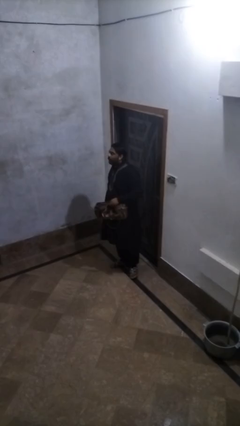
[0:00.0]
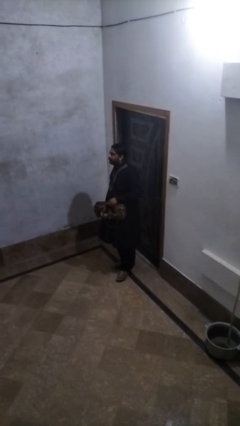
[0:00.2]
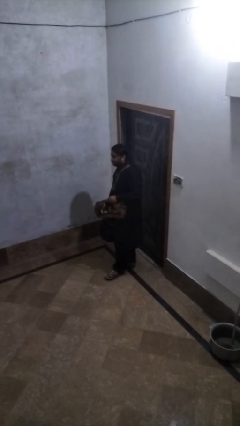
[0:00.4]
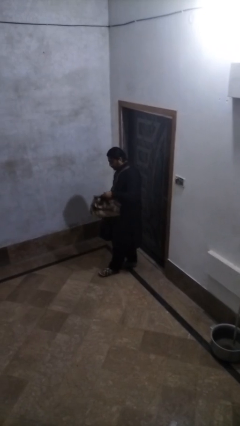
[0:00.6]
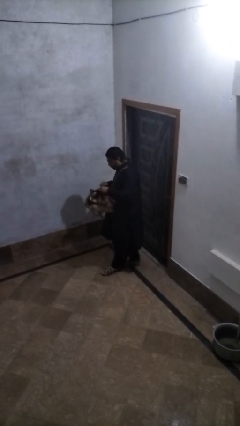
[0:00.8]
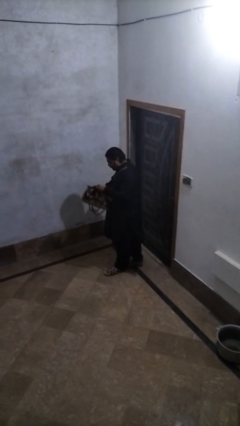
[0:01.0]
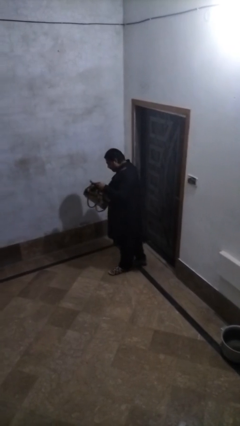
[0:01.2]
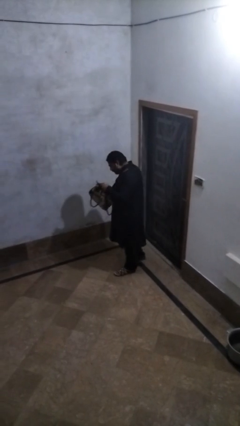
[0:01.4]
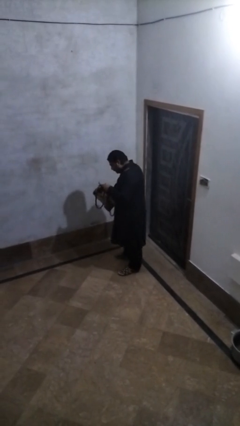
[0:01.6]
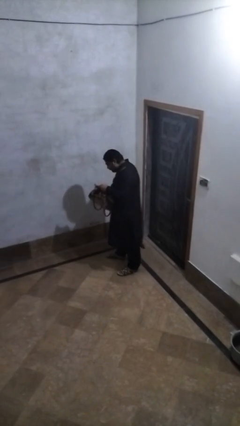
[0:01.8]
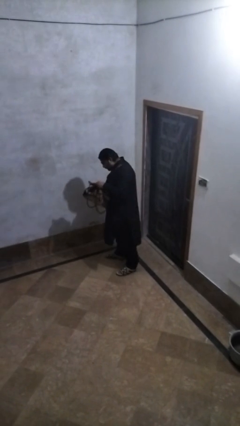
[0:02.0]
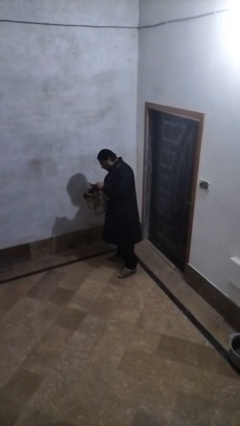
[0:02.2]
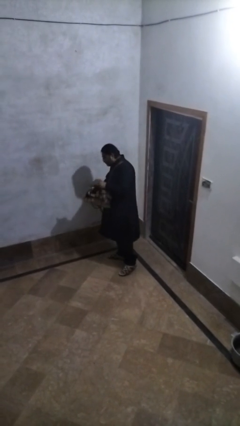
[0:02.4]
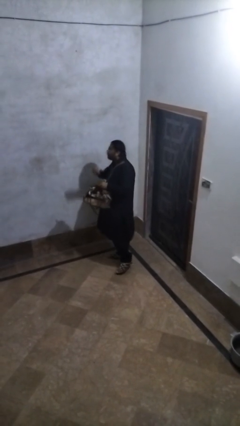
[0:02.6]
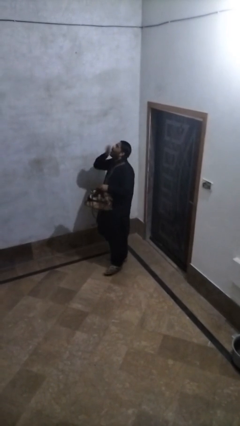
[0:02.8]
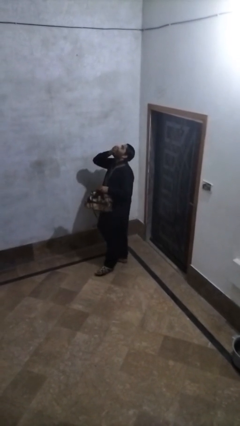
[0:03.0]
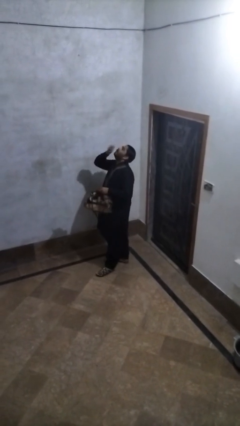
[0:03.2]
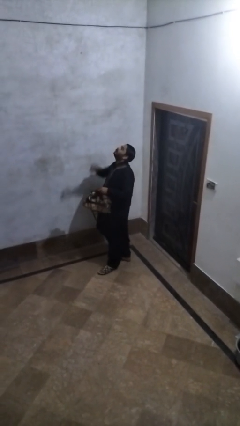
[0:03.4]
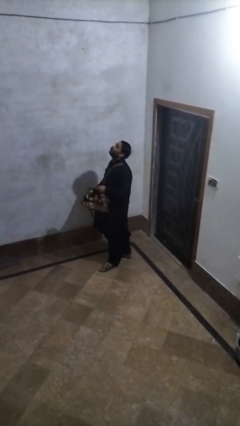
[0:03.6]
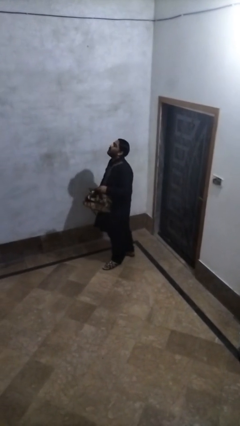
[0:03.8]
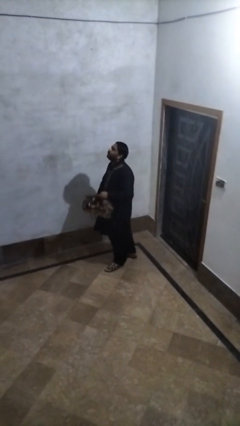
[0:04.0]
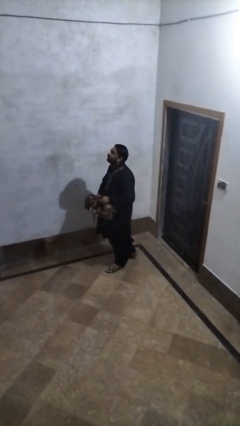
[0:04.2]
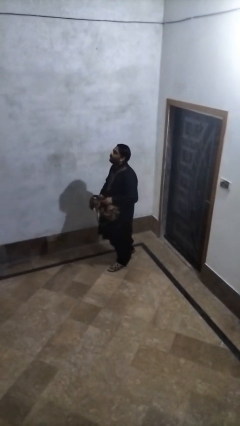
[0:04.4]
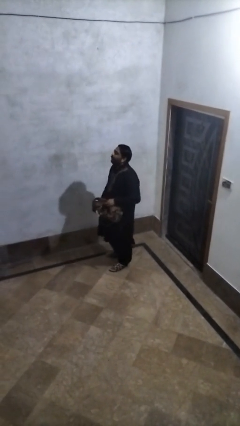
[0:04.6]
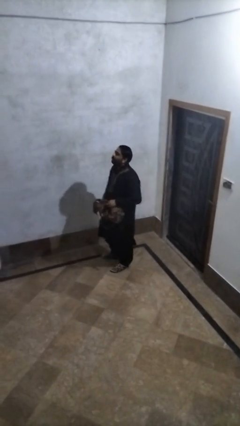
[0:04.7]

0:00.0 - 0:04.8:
person eats snack from bag

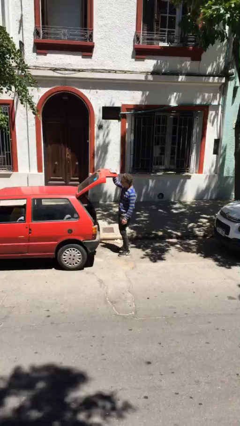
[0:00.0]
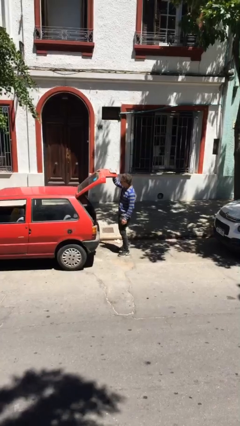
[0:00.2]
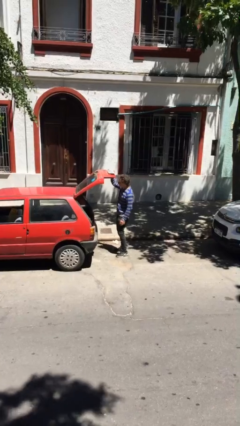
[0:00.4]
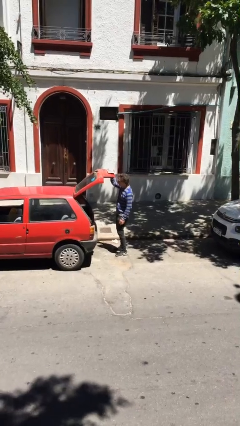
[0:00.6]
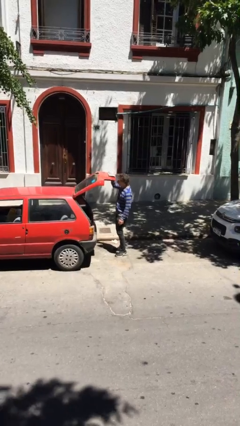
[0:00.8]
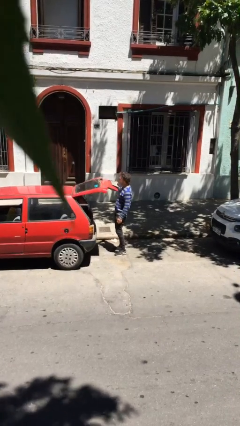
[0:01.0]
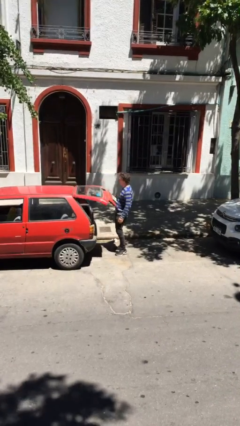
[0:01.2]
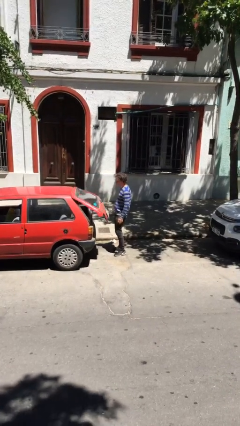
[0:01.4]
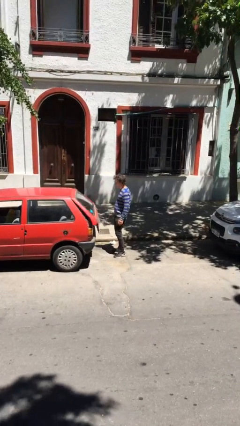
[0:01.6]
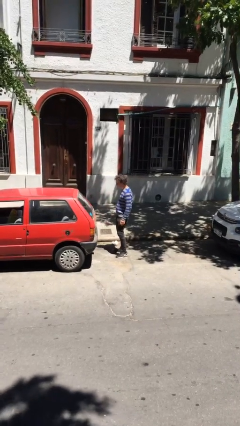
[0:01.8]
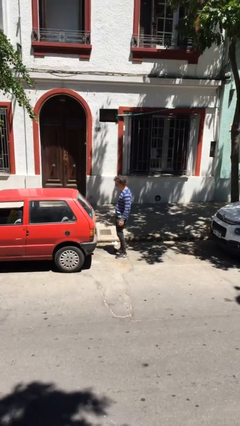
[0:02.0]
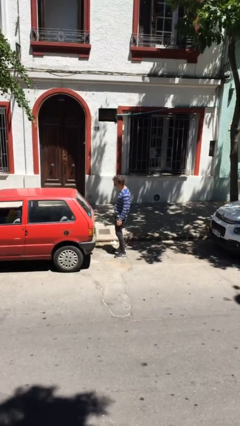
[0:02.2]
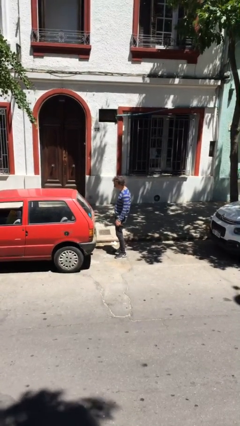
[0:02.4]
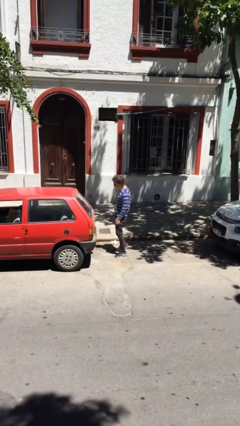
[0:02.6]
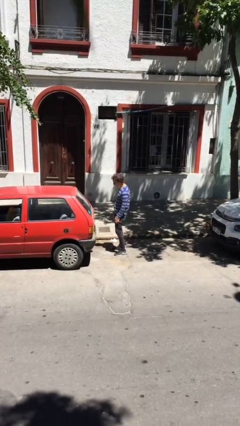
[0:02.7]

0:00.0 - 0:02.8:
person closes car trunk

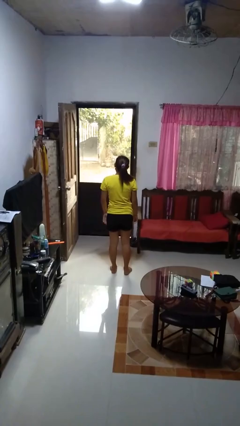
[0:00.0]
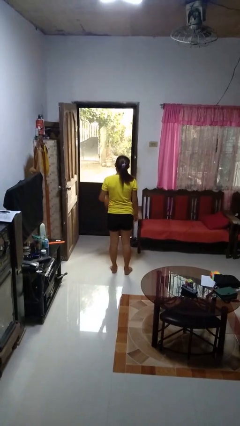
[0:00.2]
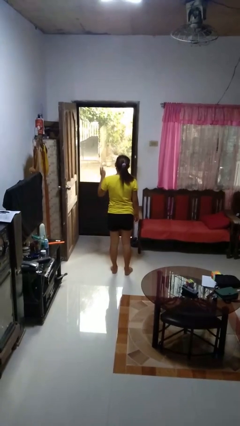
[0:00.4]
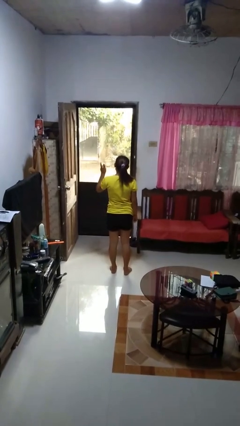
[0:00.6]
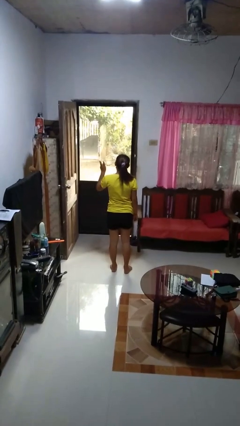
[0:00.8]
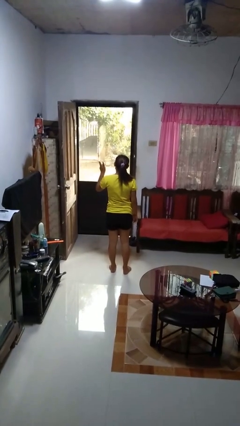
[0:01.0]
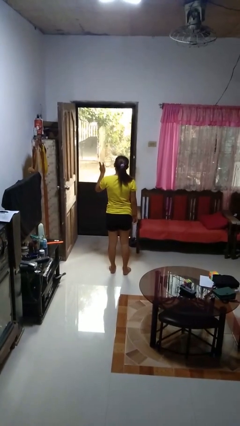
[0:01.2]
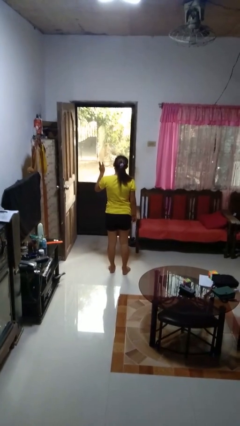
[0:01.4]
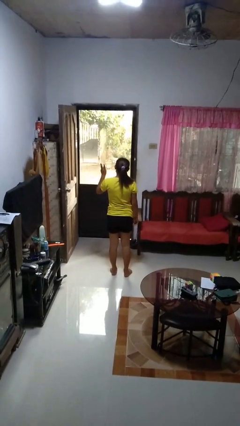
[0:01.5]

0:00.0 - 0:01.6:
person gestures number three

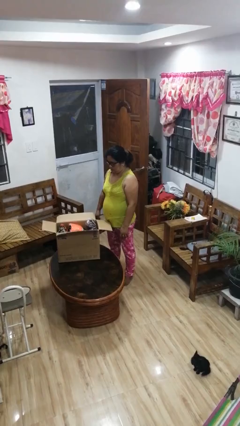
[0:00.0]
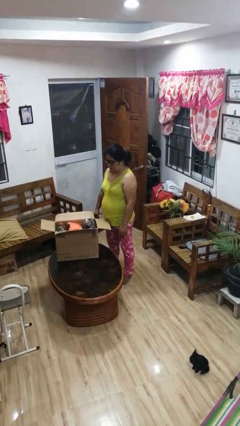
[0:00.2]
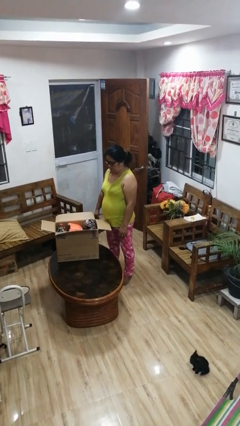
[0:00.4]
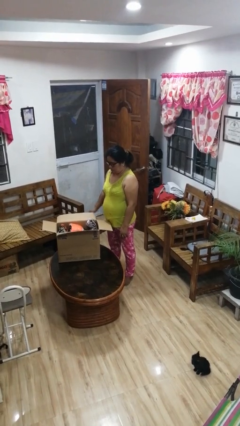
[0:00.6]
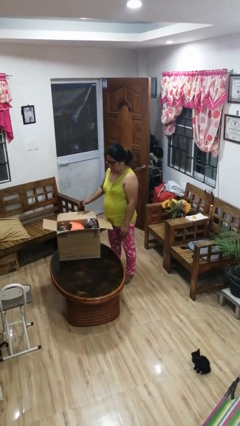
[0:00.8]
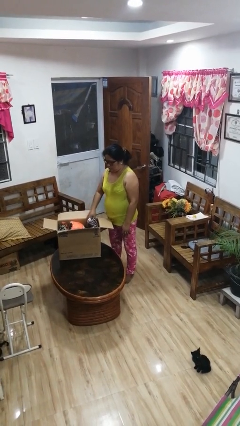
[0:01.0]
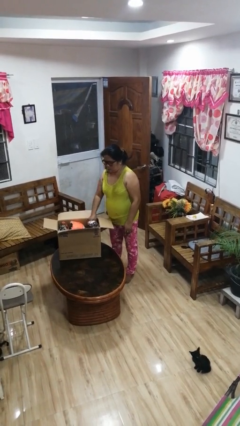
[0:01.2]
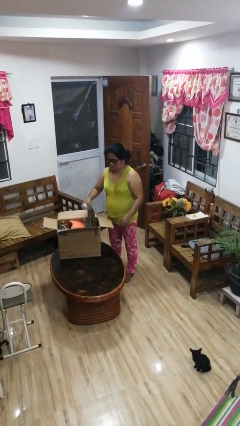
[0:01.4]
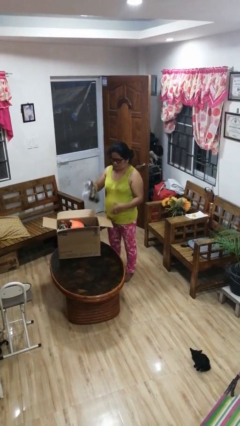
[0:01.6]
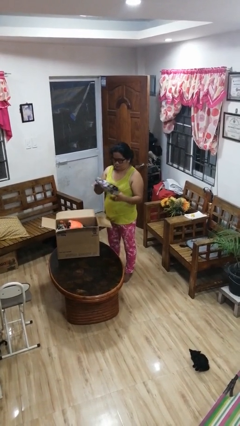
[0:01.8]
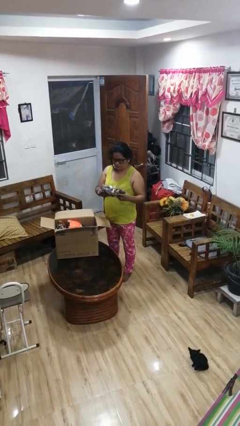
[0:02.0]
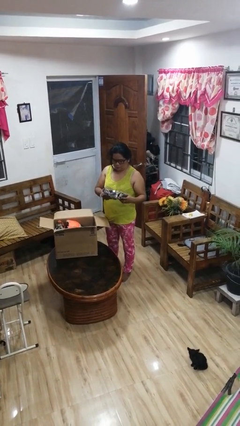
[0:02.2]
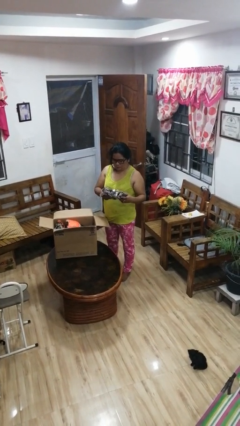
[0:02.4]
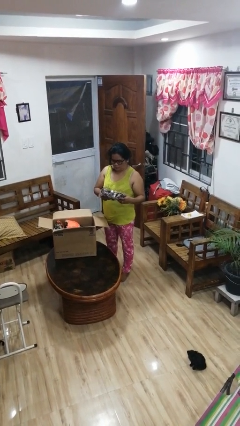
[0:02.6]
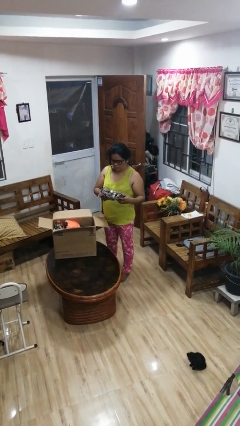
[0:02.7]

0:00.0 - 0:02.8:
person takes object from box

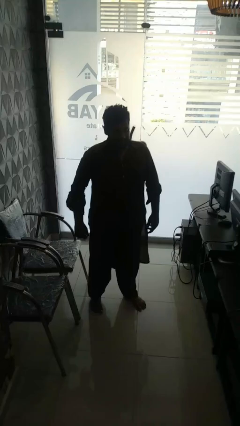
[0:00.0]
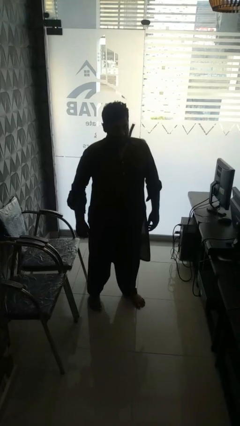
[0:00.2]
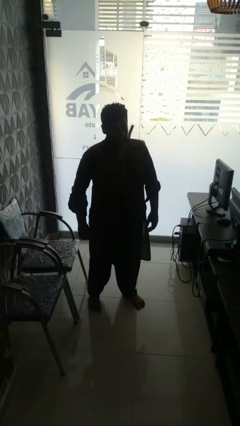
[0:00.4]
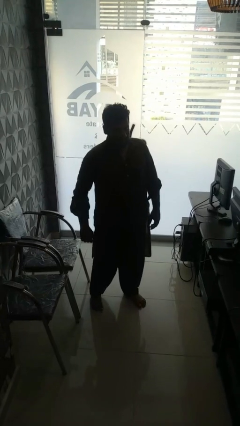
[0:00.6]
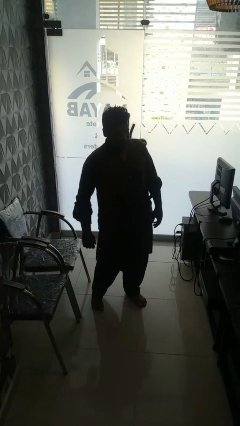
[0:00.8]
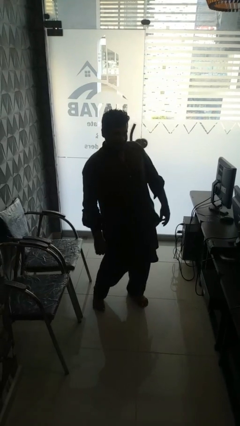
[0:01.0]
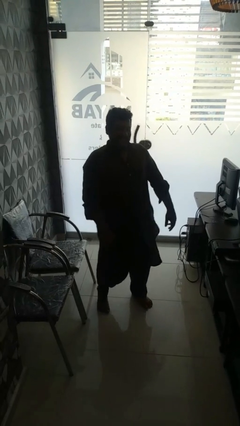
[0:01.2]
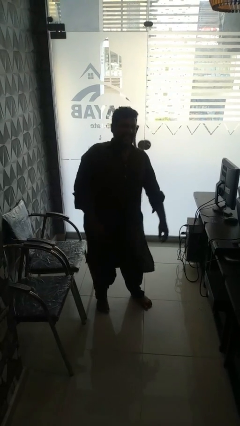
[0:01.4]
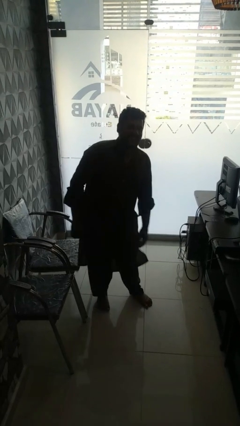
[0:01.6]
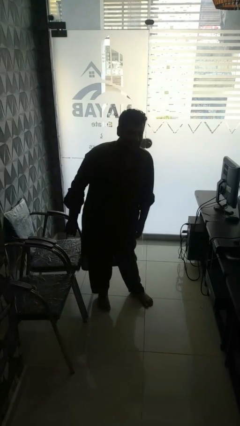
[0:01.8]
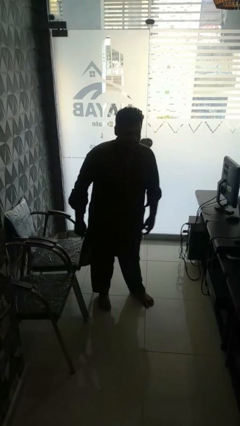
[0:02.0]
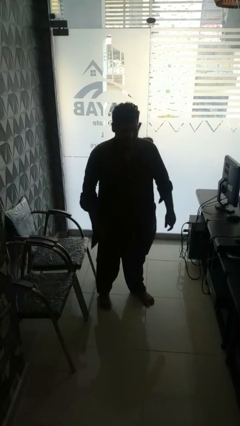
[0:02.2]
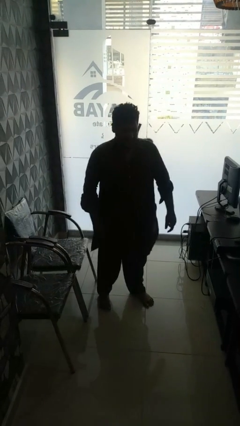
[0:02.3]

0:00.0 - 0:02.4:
person wiggles hips

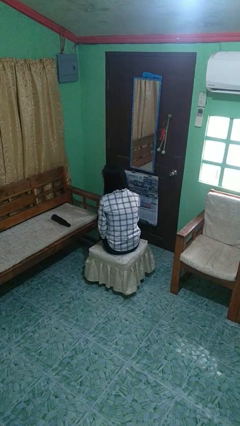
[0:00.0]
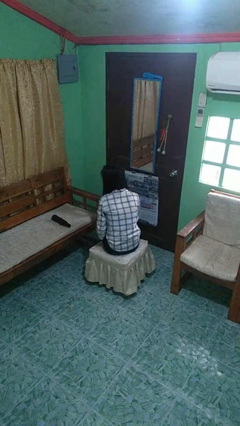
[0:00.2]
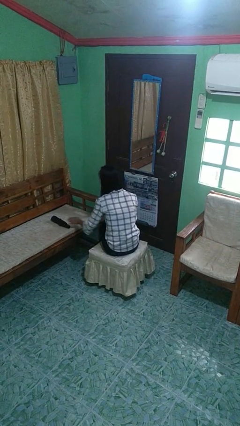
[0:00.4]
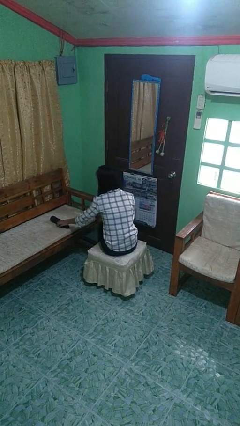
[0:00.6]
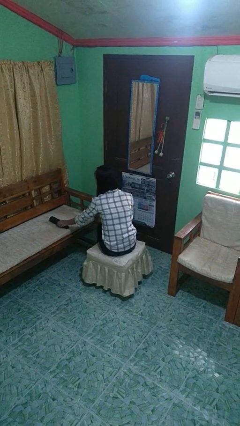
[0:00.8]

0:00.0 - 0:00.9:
person picks up object from couch

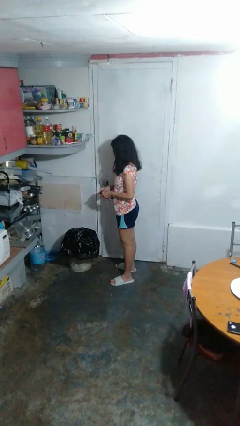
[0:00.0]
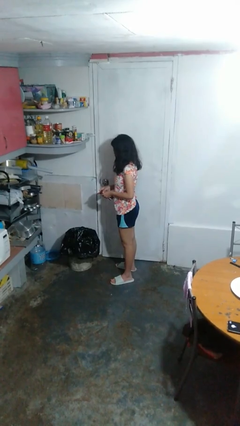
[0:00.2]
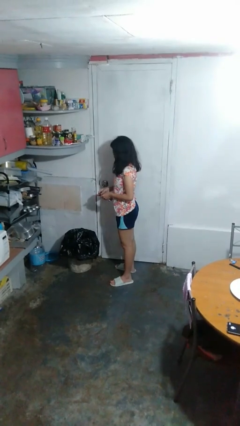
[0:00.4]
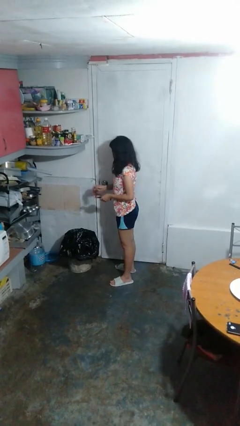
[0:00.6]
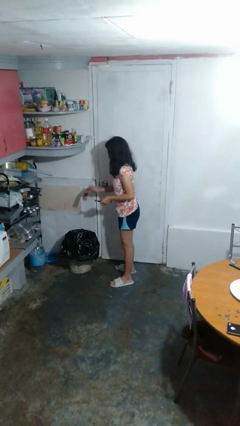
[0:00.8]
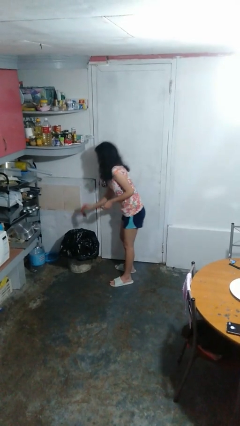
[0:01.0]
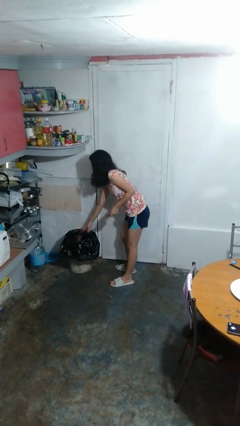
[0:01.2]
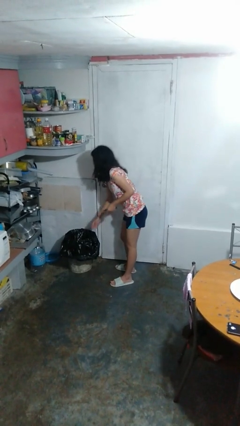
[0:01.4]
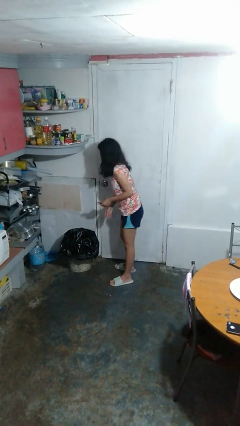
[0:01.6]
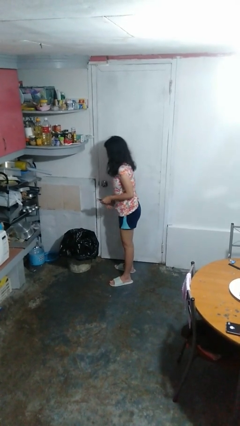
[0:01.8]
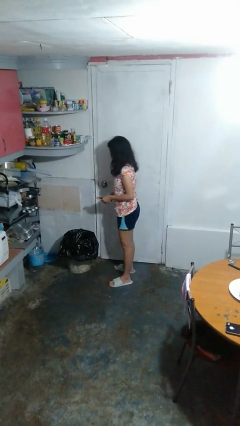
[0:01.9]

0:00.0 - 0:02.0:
person discards trash
